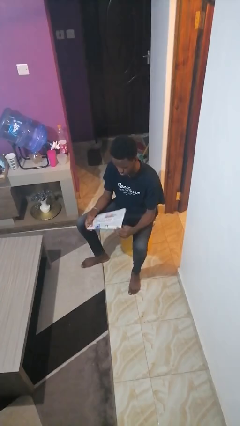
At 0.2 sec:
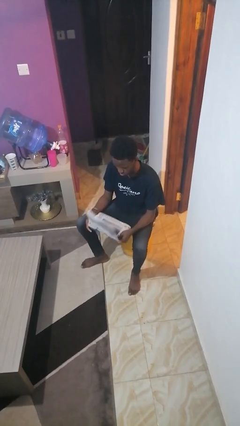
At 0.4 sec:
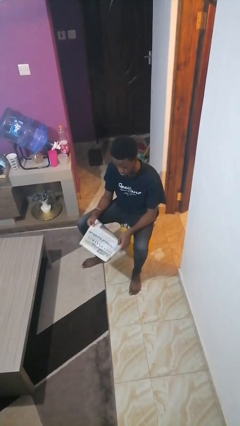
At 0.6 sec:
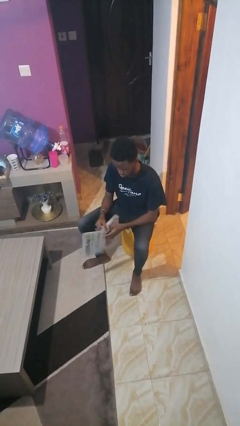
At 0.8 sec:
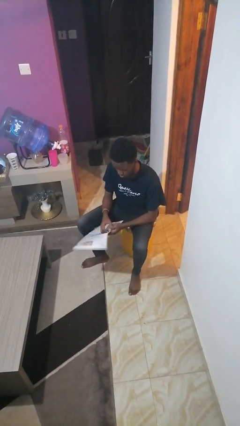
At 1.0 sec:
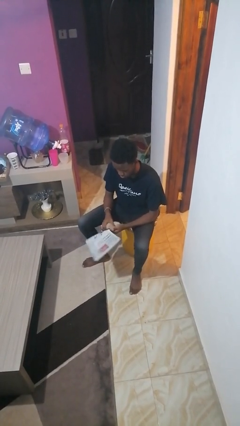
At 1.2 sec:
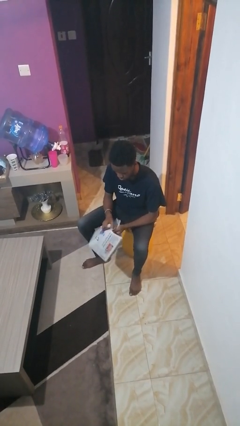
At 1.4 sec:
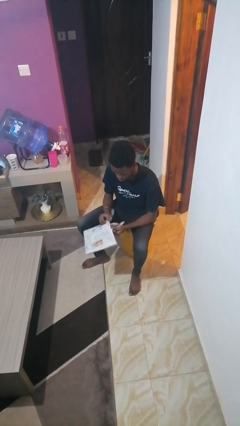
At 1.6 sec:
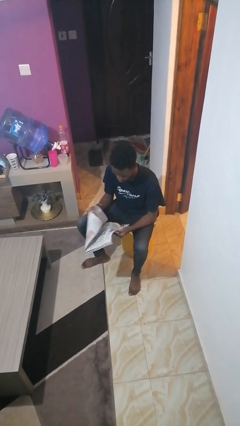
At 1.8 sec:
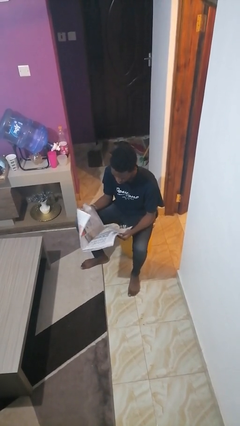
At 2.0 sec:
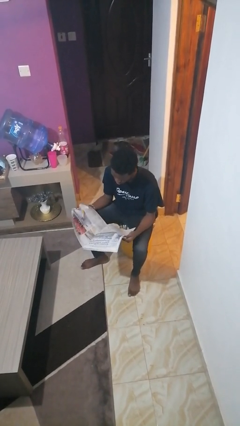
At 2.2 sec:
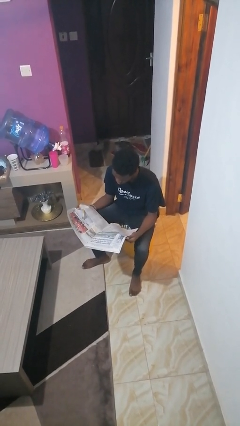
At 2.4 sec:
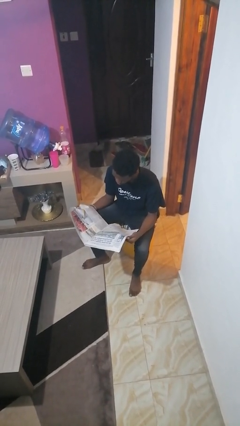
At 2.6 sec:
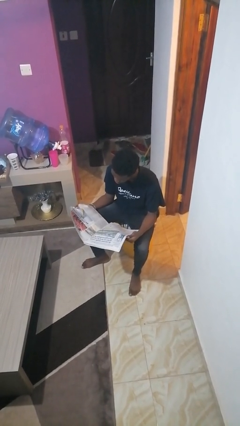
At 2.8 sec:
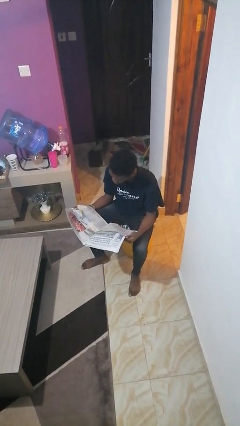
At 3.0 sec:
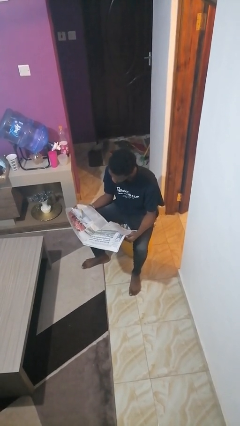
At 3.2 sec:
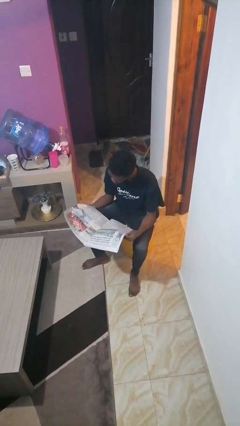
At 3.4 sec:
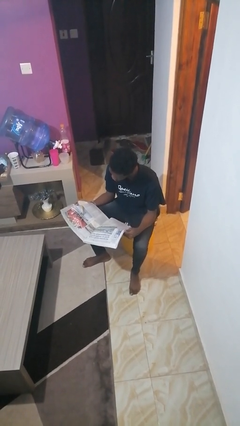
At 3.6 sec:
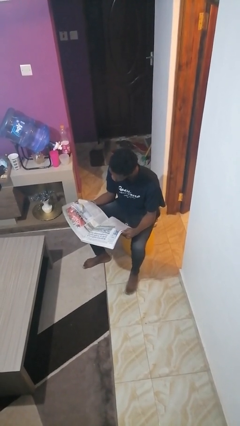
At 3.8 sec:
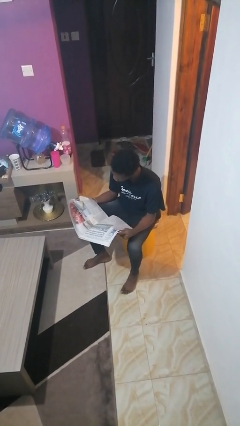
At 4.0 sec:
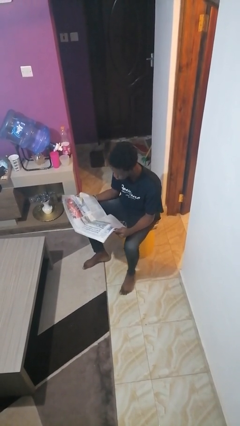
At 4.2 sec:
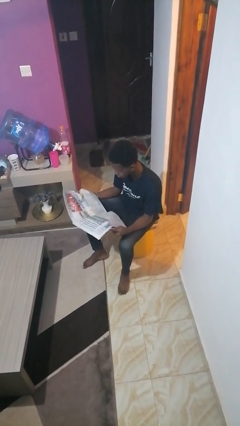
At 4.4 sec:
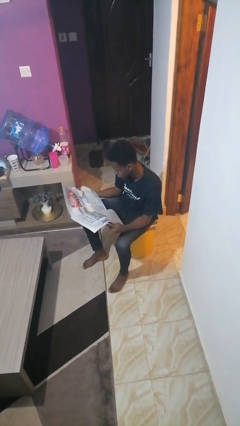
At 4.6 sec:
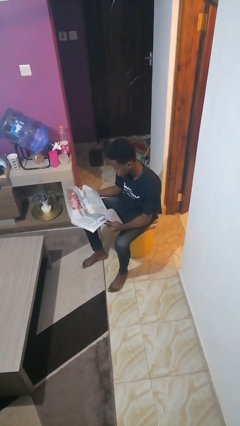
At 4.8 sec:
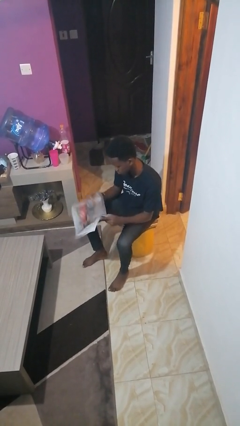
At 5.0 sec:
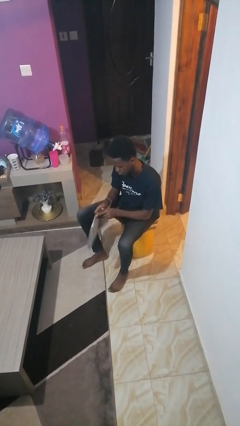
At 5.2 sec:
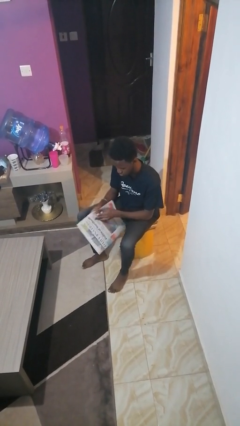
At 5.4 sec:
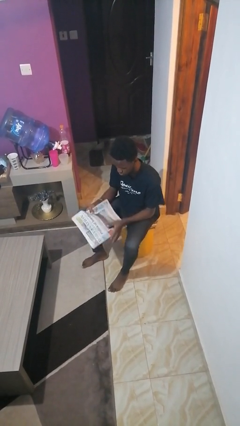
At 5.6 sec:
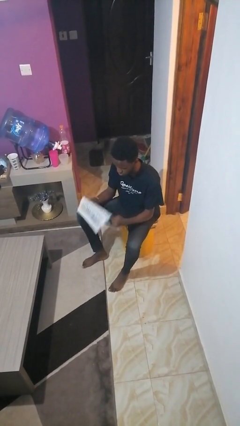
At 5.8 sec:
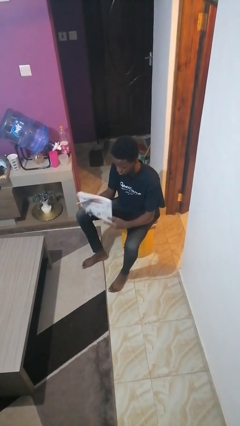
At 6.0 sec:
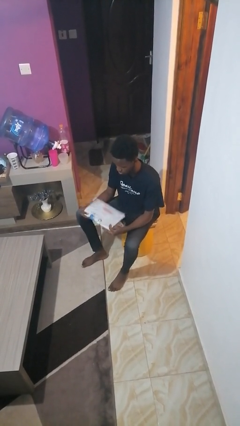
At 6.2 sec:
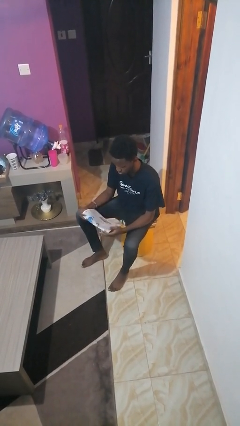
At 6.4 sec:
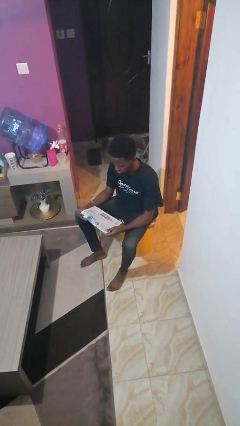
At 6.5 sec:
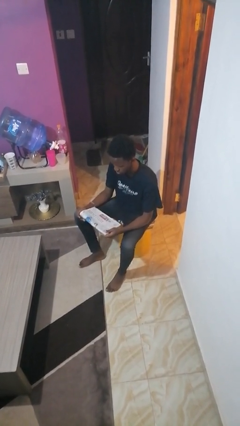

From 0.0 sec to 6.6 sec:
person reads newspaper

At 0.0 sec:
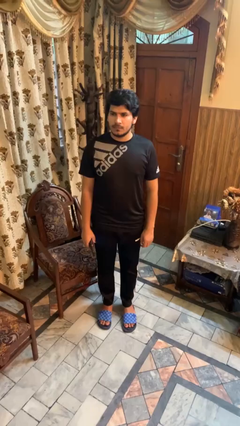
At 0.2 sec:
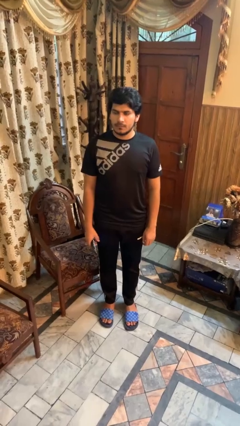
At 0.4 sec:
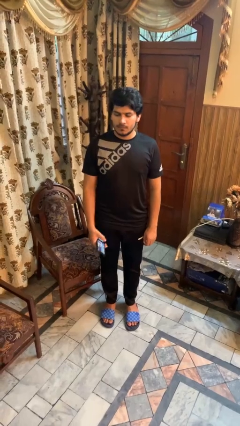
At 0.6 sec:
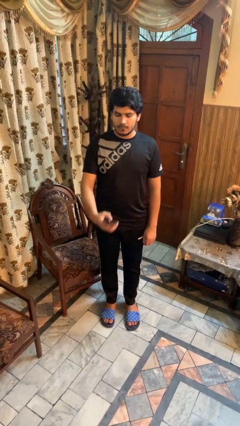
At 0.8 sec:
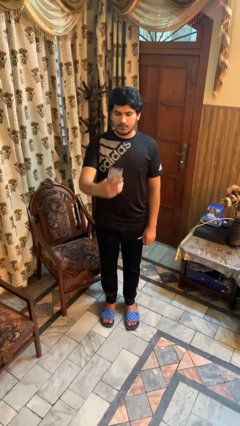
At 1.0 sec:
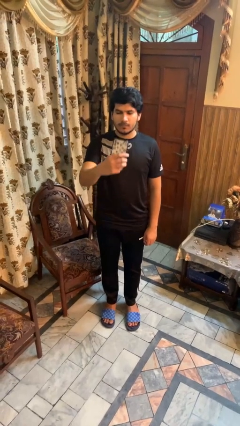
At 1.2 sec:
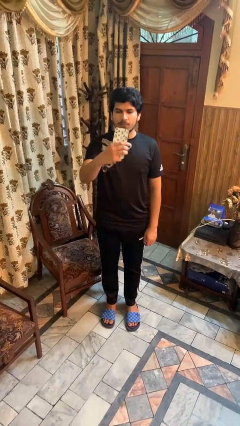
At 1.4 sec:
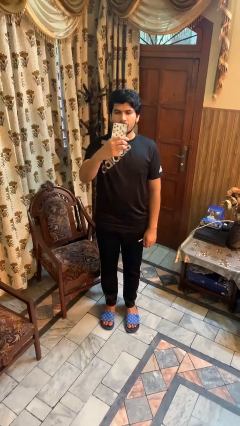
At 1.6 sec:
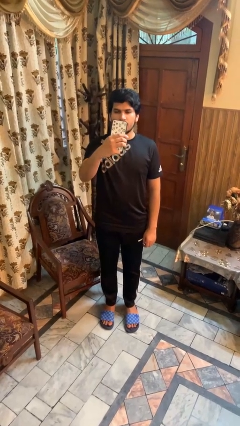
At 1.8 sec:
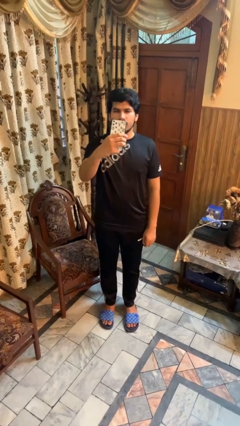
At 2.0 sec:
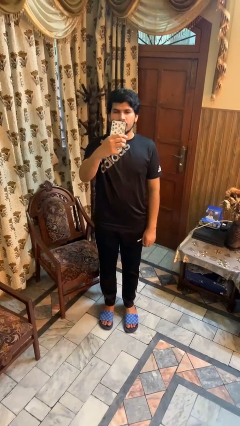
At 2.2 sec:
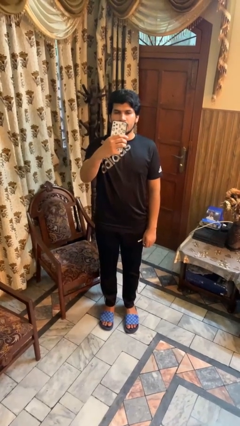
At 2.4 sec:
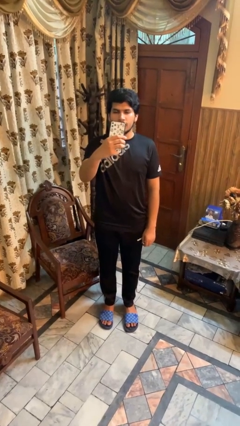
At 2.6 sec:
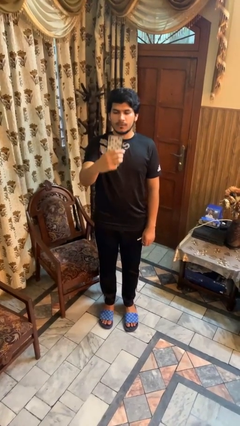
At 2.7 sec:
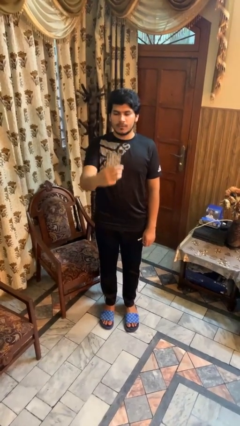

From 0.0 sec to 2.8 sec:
person takes selfie

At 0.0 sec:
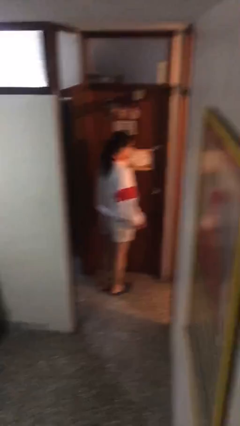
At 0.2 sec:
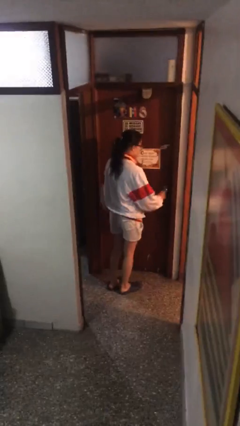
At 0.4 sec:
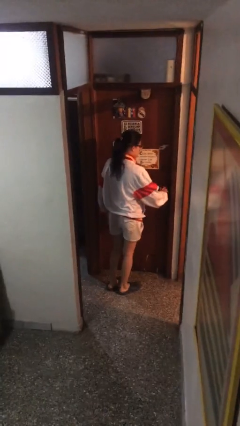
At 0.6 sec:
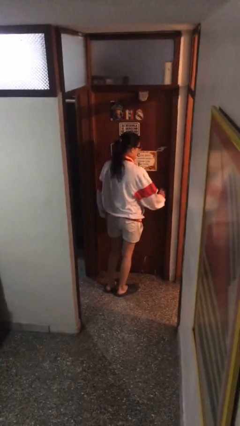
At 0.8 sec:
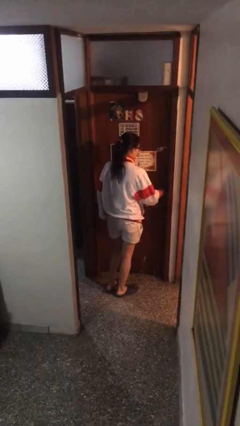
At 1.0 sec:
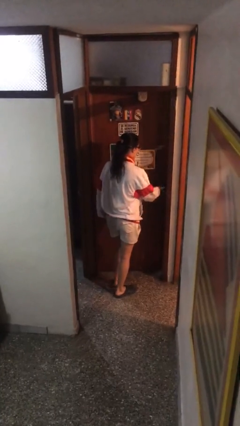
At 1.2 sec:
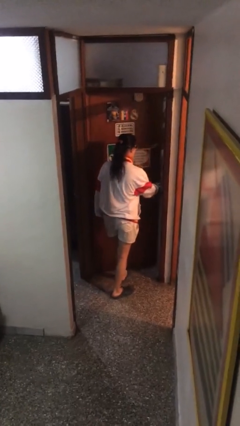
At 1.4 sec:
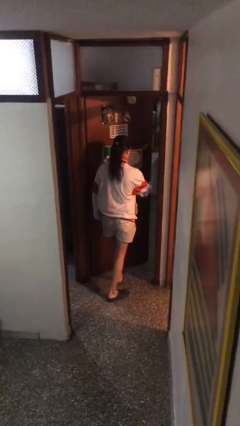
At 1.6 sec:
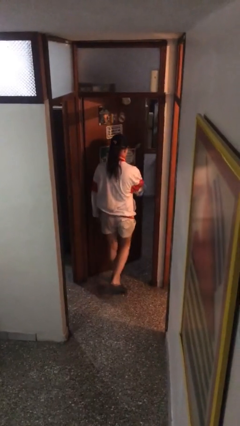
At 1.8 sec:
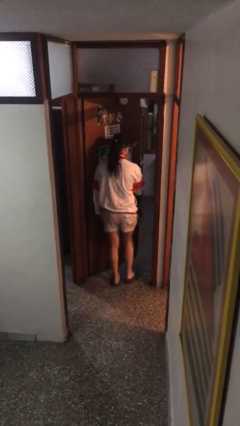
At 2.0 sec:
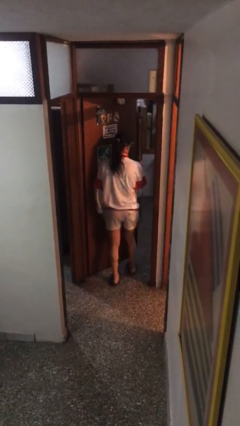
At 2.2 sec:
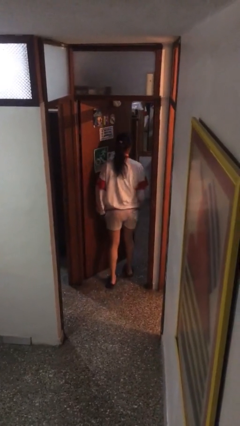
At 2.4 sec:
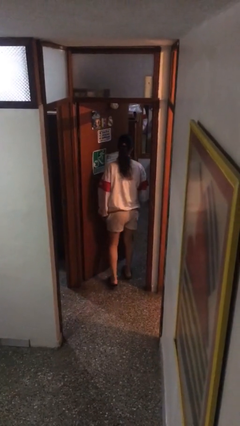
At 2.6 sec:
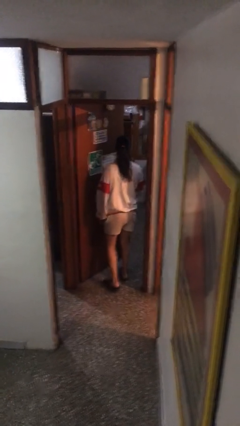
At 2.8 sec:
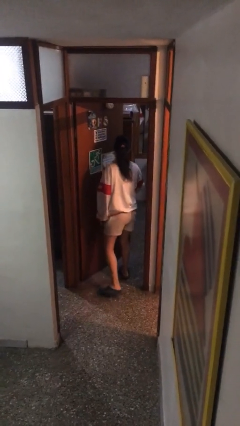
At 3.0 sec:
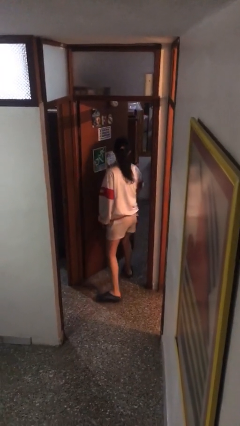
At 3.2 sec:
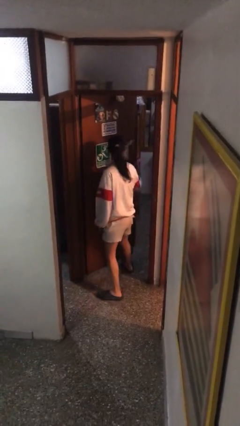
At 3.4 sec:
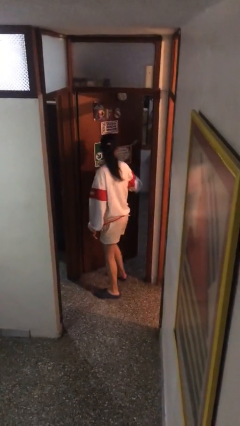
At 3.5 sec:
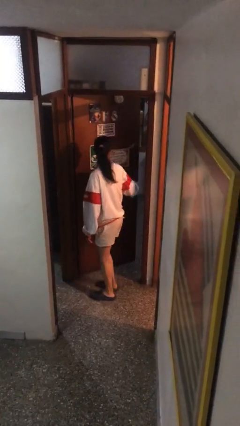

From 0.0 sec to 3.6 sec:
person opens facility door

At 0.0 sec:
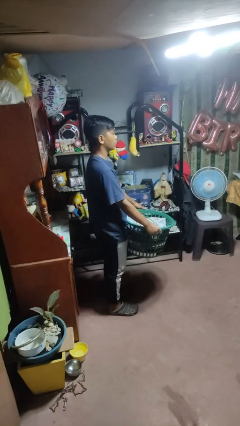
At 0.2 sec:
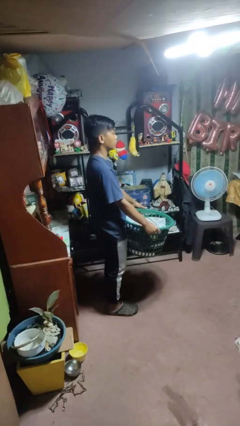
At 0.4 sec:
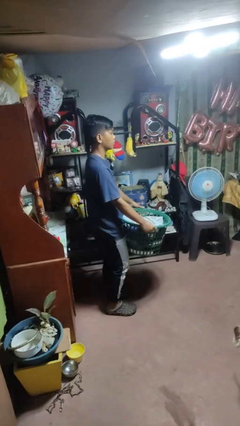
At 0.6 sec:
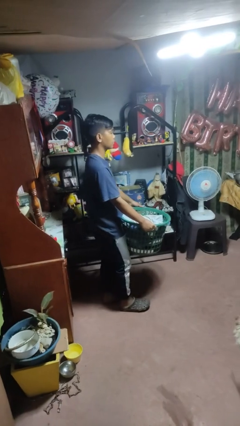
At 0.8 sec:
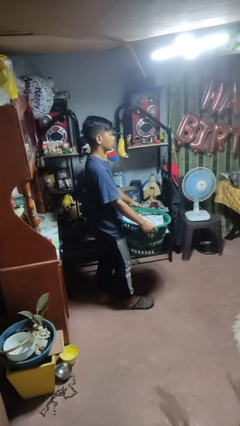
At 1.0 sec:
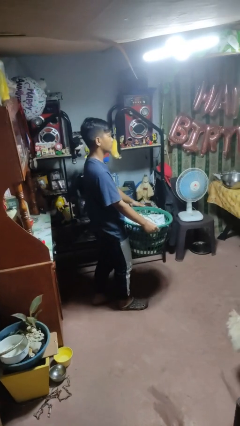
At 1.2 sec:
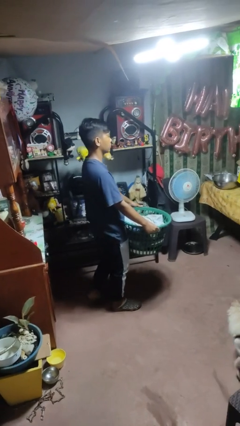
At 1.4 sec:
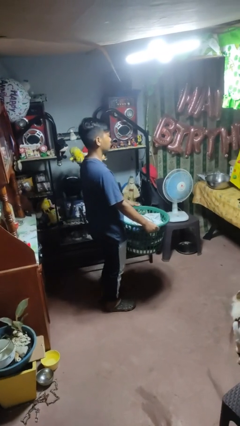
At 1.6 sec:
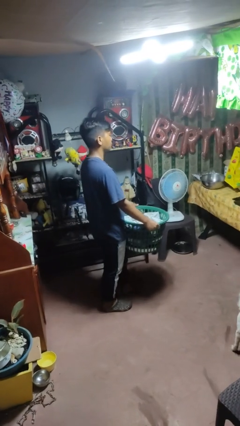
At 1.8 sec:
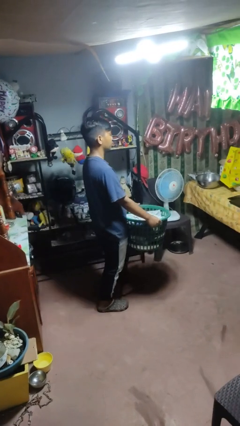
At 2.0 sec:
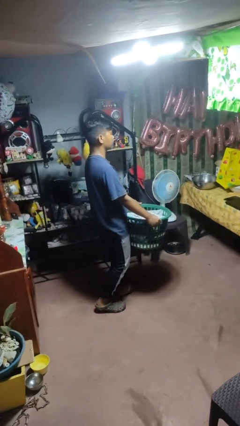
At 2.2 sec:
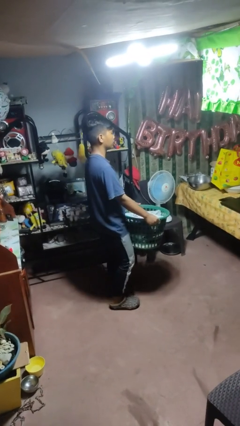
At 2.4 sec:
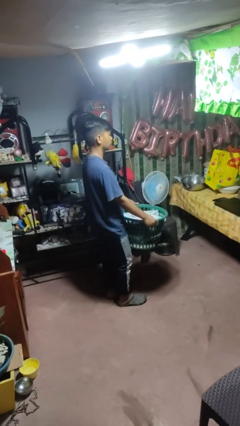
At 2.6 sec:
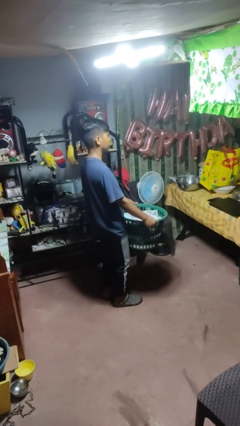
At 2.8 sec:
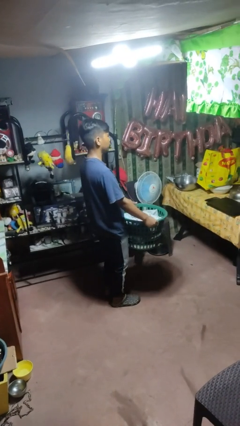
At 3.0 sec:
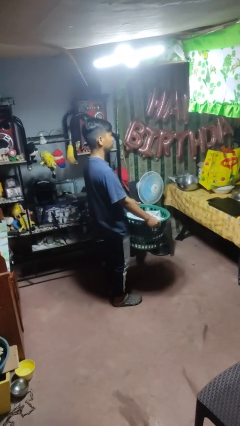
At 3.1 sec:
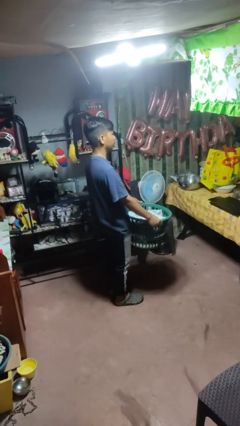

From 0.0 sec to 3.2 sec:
person carries laundry basket

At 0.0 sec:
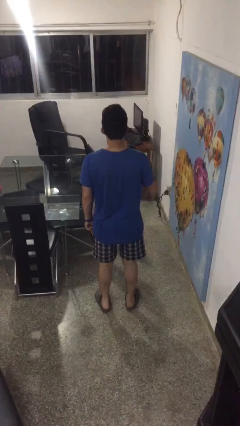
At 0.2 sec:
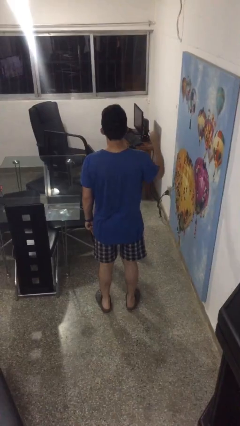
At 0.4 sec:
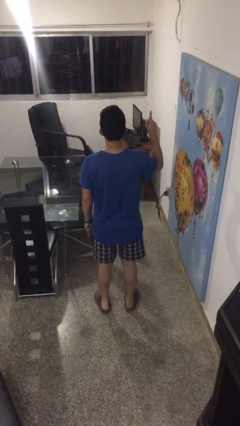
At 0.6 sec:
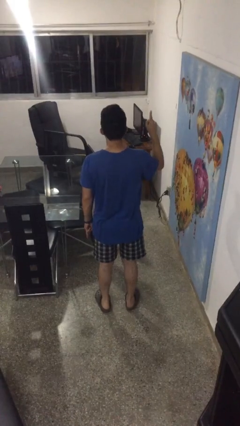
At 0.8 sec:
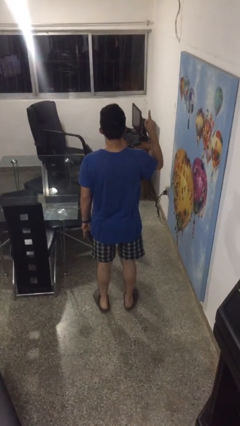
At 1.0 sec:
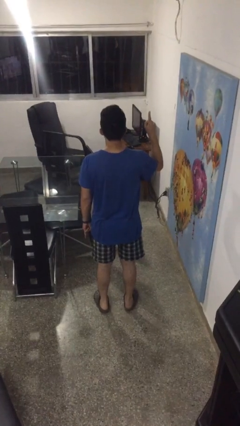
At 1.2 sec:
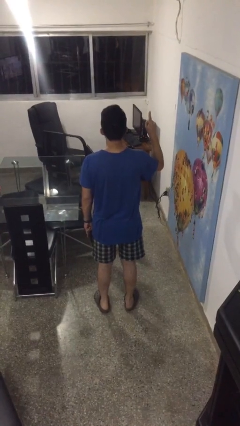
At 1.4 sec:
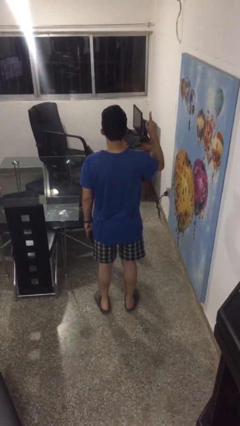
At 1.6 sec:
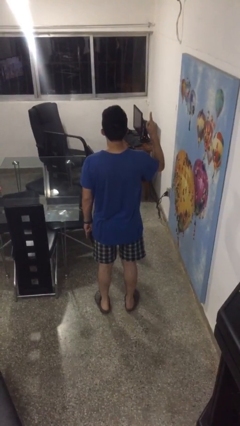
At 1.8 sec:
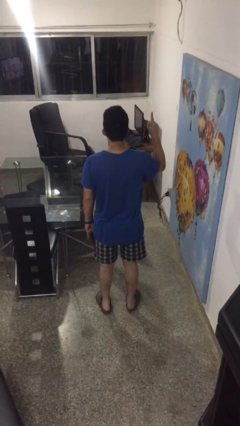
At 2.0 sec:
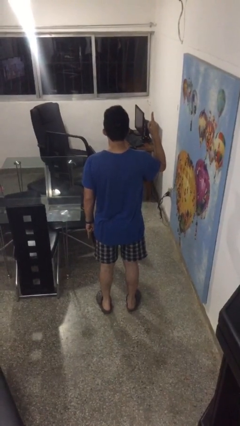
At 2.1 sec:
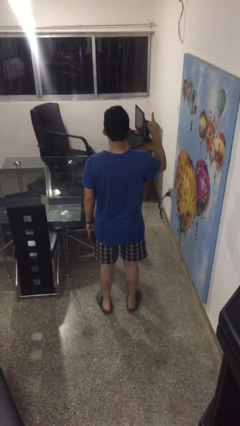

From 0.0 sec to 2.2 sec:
person gestures number one
